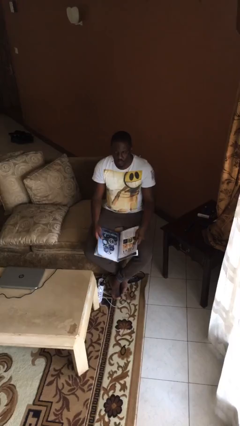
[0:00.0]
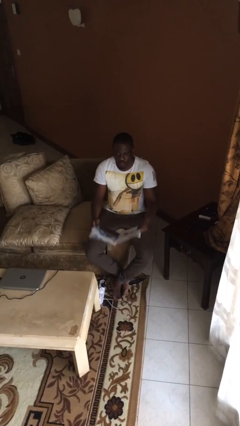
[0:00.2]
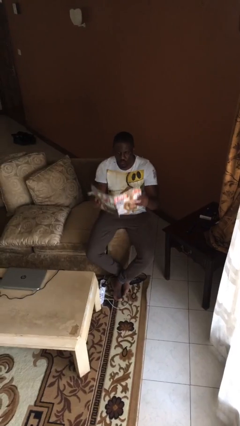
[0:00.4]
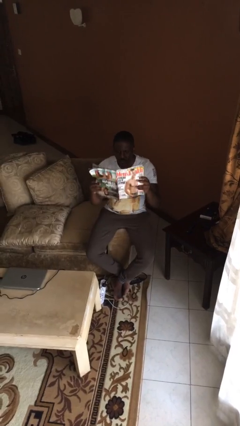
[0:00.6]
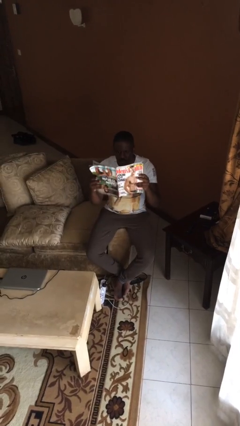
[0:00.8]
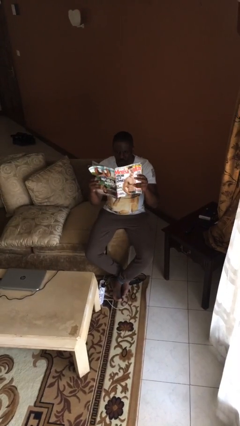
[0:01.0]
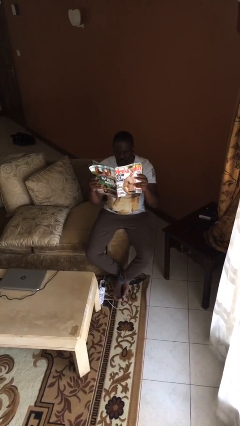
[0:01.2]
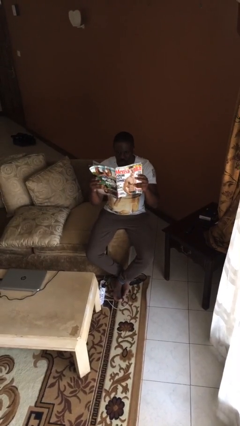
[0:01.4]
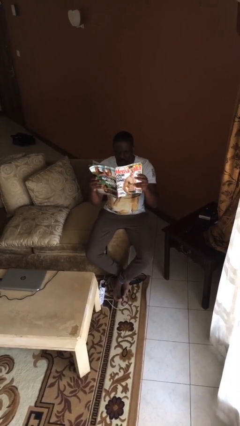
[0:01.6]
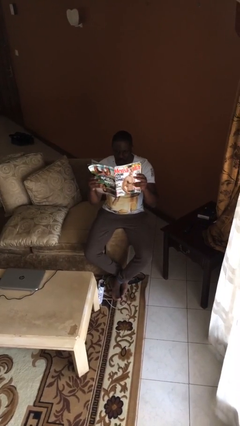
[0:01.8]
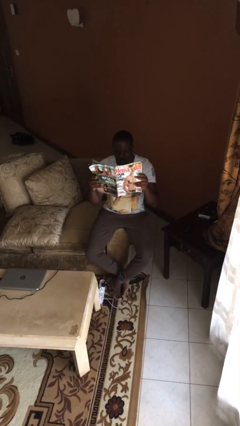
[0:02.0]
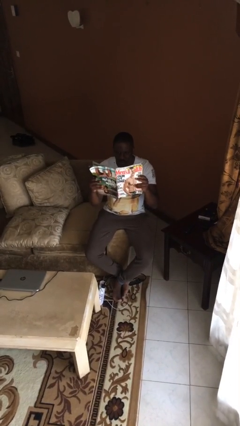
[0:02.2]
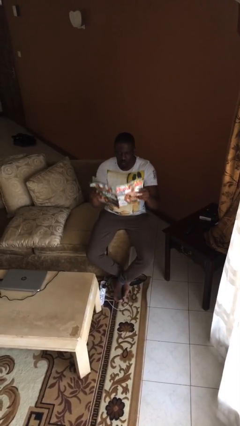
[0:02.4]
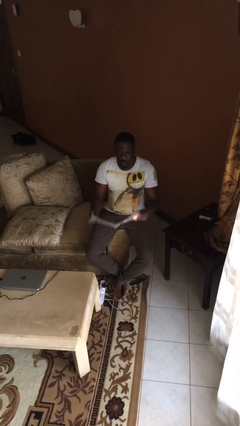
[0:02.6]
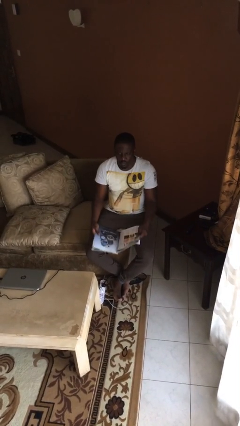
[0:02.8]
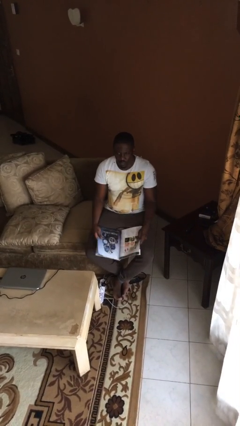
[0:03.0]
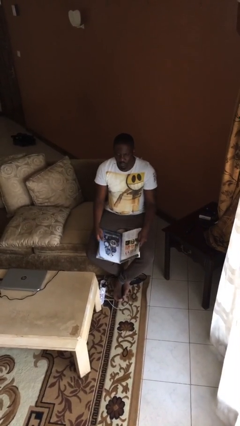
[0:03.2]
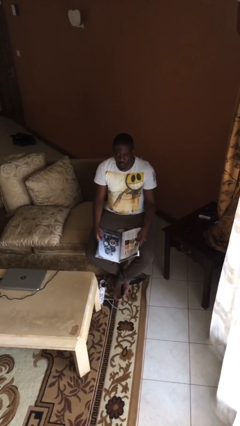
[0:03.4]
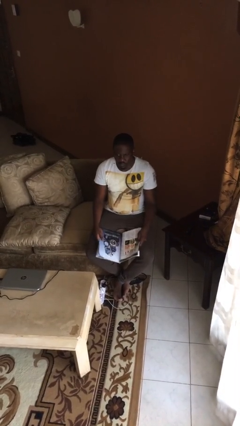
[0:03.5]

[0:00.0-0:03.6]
person reads document

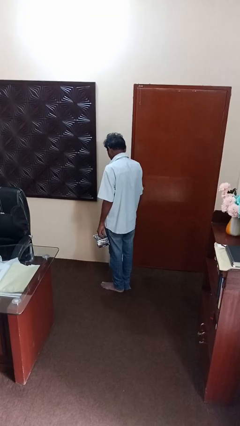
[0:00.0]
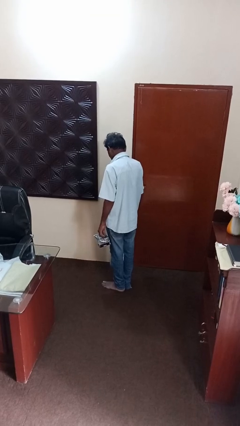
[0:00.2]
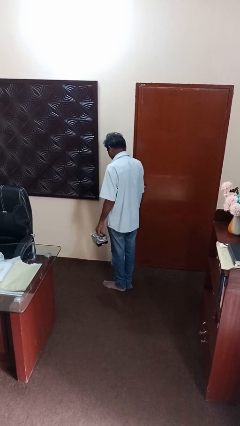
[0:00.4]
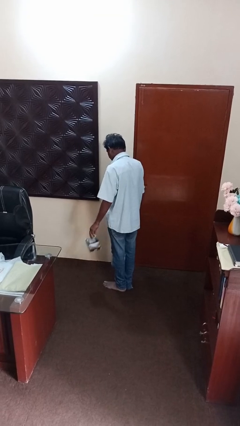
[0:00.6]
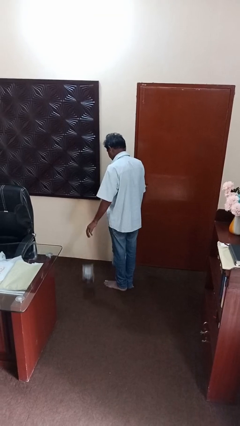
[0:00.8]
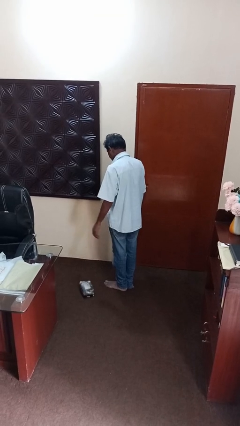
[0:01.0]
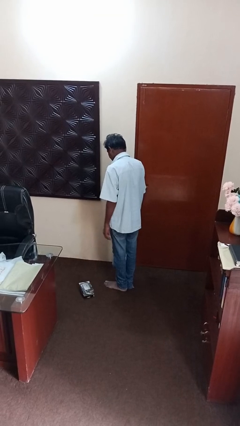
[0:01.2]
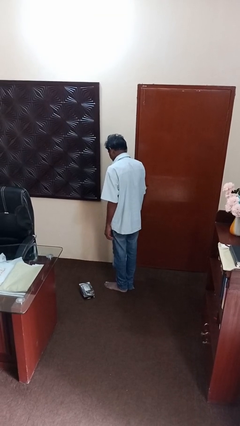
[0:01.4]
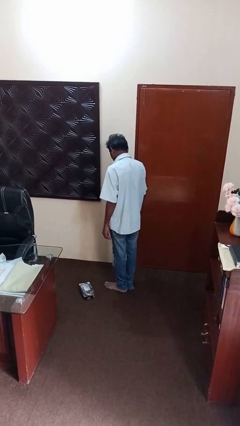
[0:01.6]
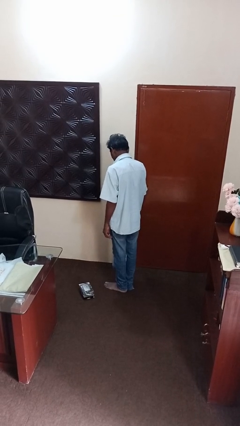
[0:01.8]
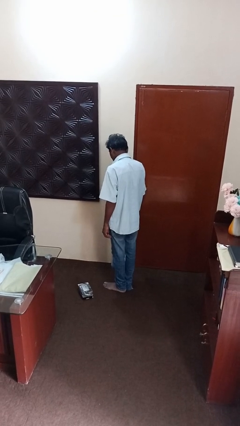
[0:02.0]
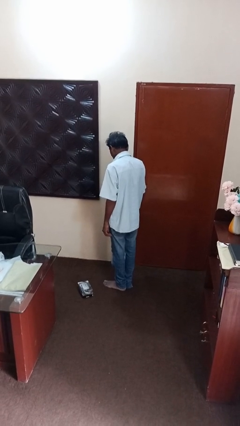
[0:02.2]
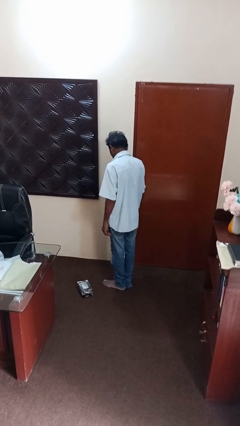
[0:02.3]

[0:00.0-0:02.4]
person throws object to ground

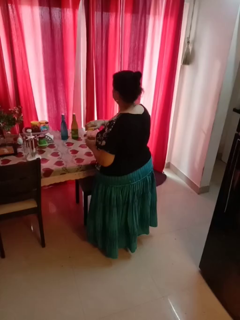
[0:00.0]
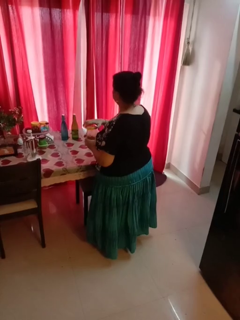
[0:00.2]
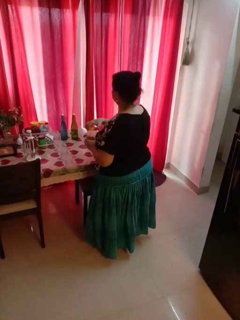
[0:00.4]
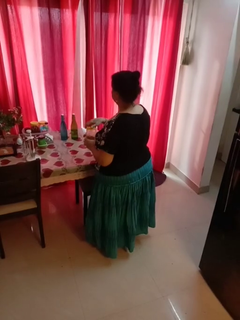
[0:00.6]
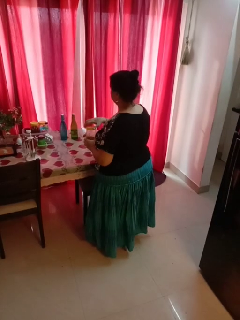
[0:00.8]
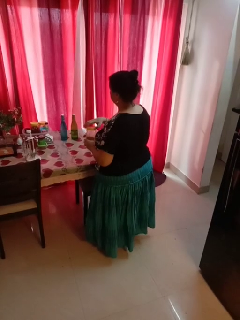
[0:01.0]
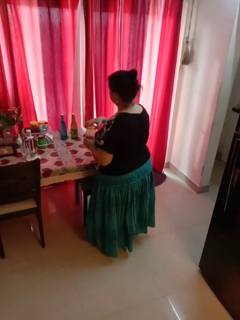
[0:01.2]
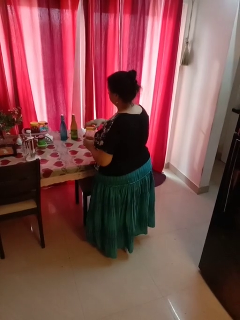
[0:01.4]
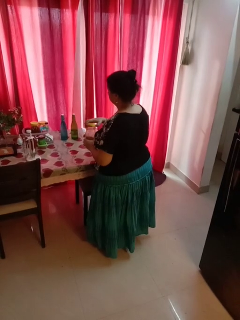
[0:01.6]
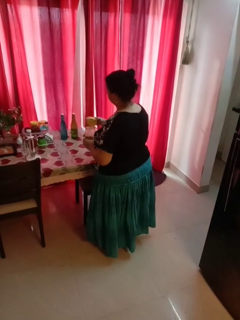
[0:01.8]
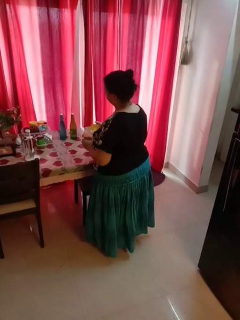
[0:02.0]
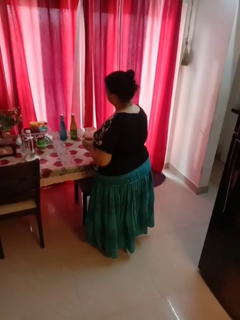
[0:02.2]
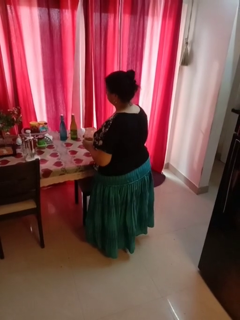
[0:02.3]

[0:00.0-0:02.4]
person opens jar

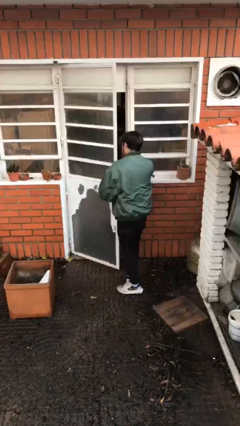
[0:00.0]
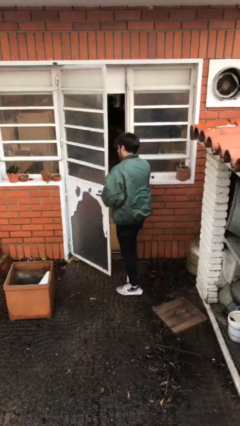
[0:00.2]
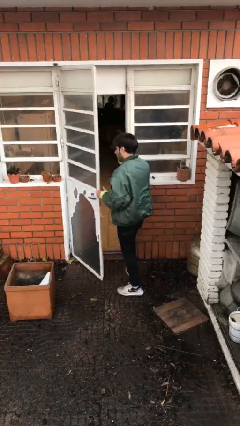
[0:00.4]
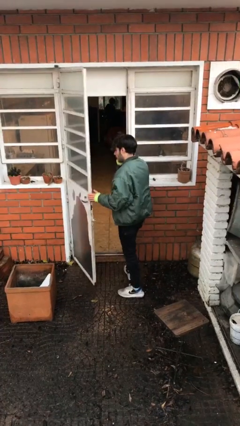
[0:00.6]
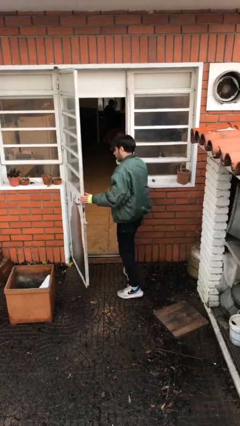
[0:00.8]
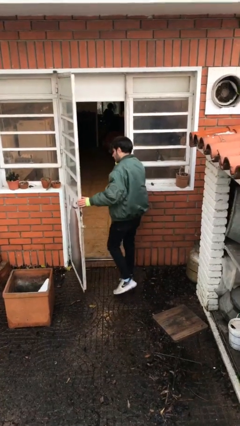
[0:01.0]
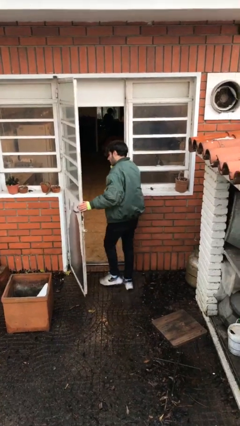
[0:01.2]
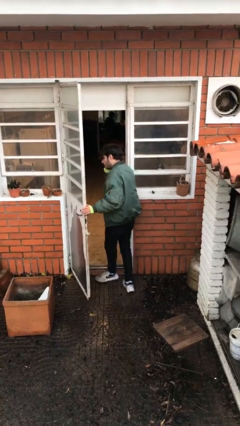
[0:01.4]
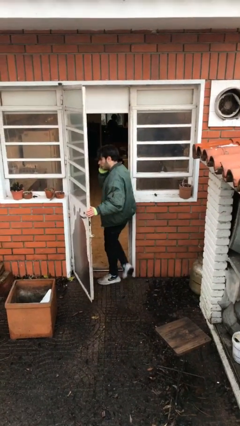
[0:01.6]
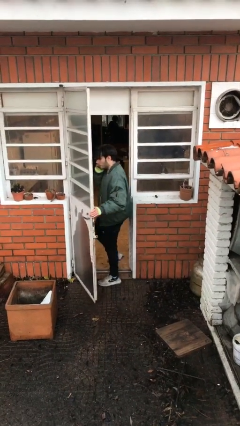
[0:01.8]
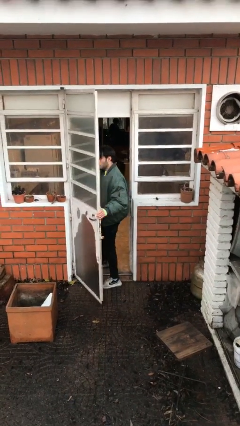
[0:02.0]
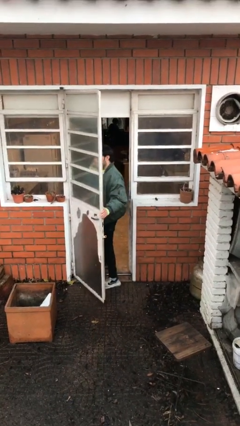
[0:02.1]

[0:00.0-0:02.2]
person exits scene through structure

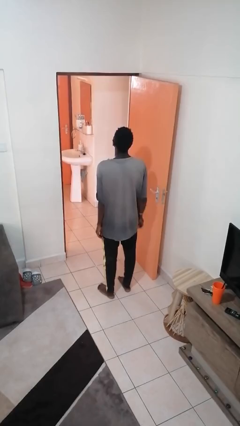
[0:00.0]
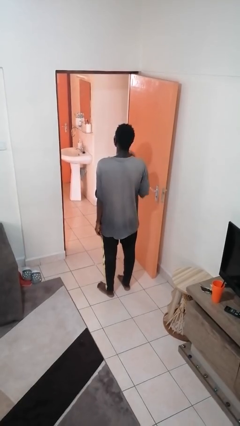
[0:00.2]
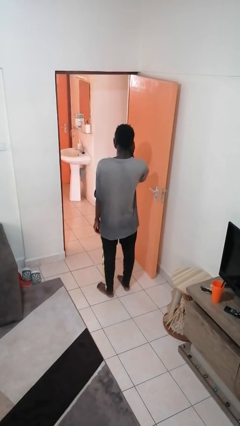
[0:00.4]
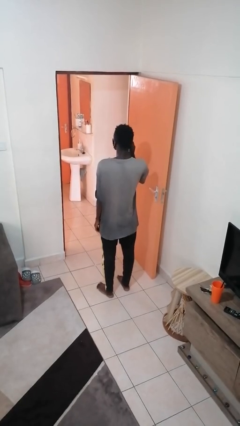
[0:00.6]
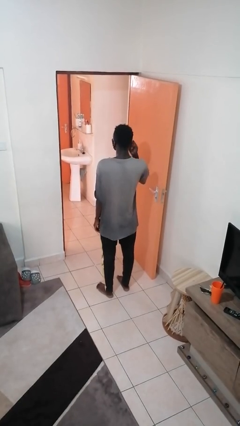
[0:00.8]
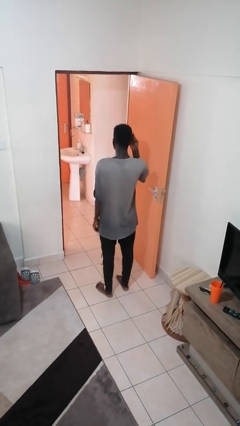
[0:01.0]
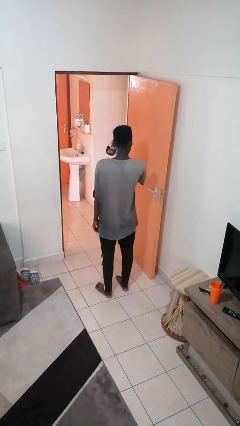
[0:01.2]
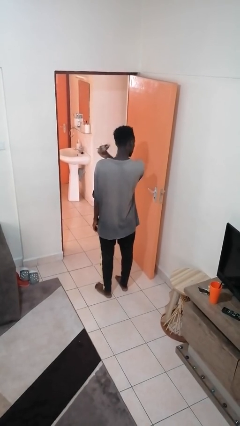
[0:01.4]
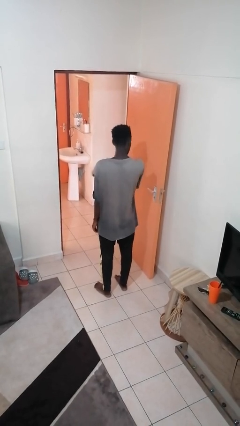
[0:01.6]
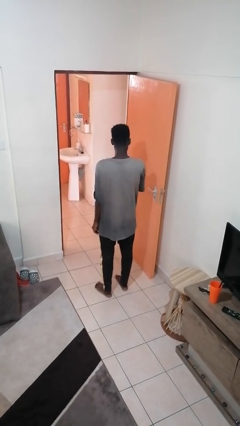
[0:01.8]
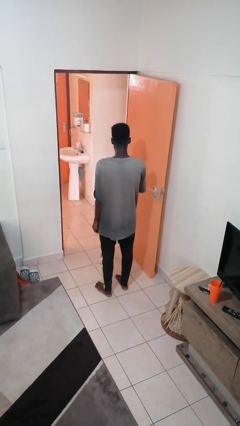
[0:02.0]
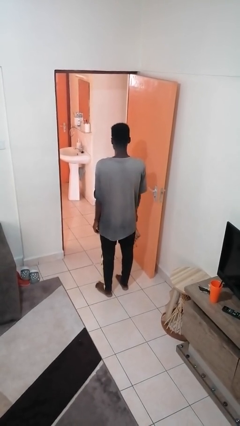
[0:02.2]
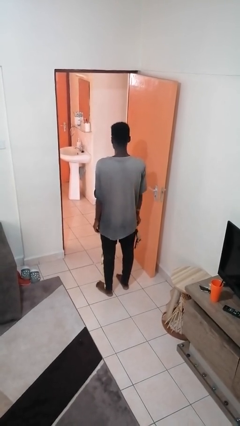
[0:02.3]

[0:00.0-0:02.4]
person takes off facemask

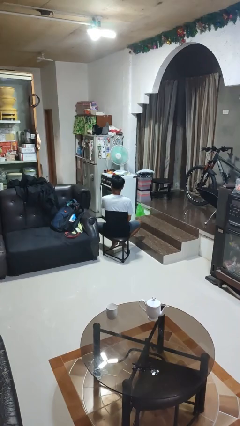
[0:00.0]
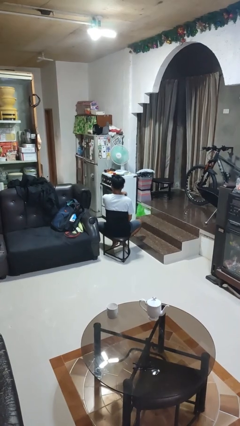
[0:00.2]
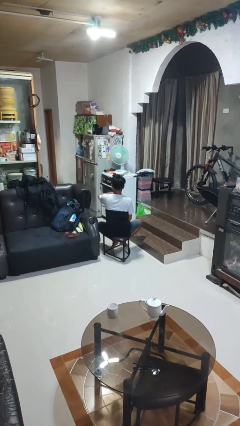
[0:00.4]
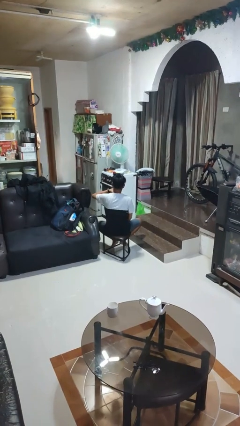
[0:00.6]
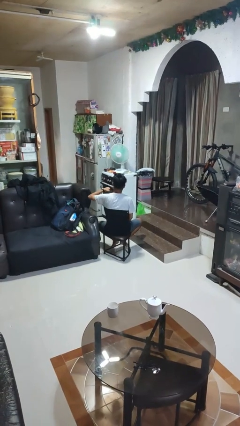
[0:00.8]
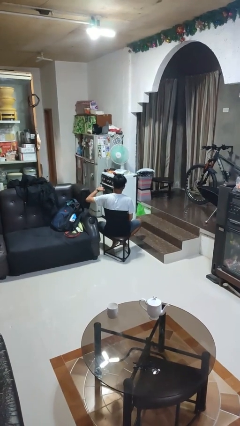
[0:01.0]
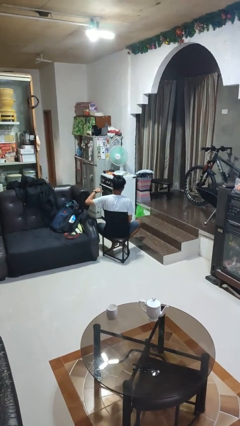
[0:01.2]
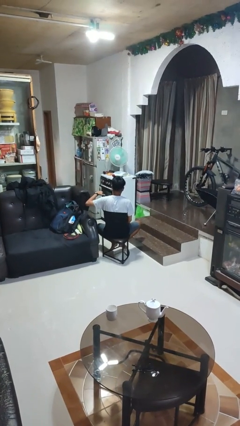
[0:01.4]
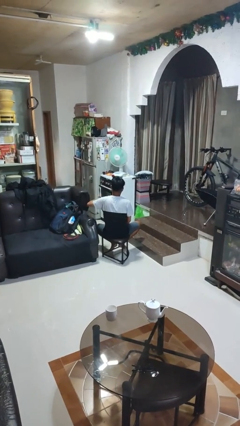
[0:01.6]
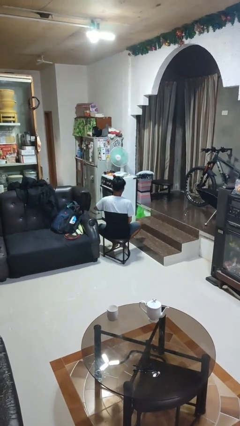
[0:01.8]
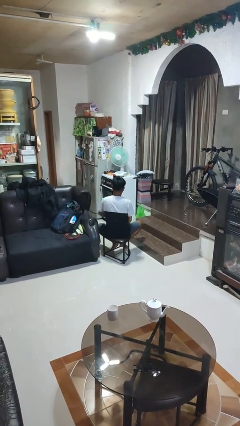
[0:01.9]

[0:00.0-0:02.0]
person gestures cut

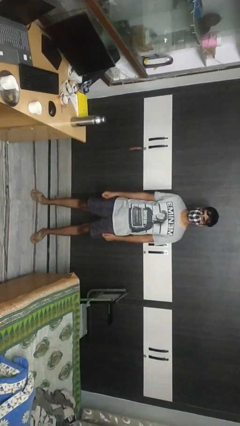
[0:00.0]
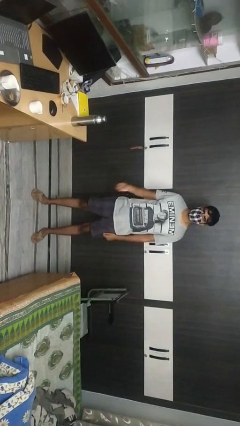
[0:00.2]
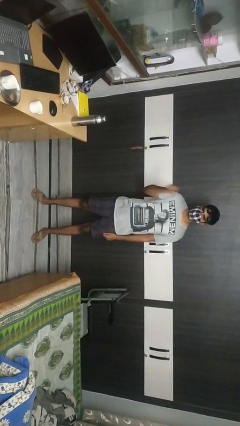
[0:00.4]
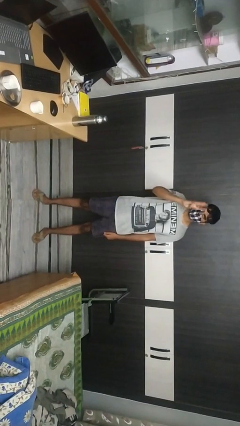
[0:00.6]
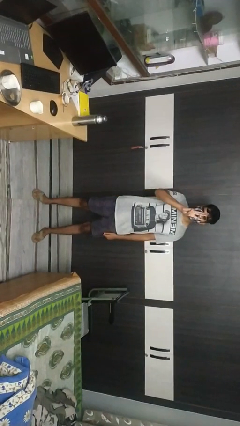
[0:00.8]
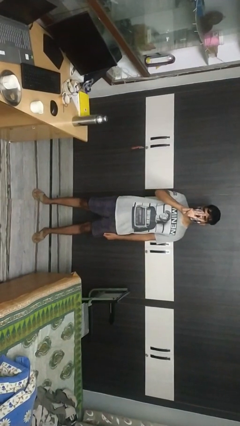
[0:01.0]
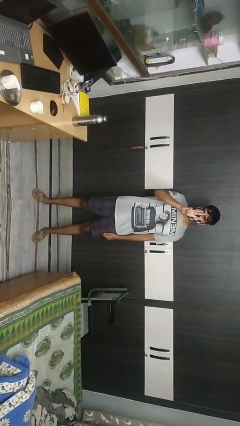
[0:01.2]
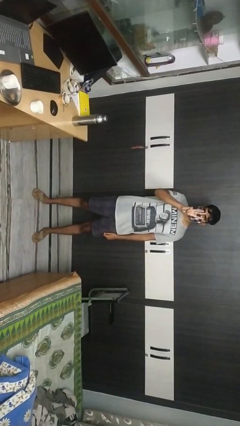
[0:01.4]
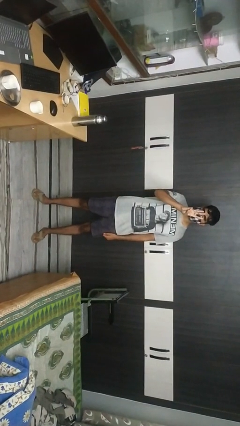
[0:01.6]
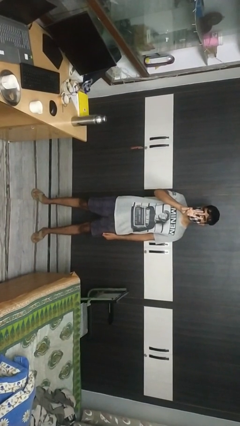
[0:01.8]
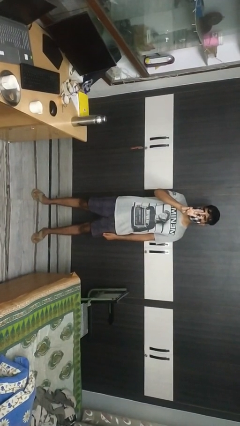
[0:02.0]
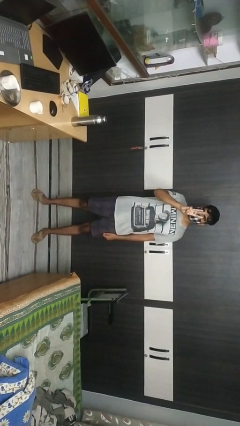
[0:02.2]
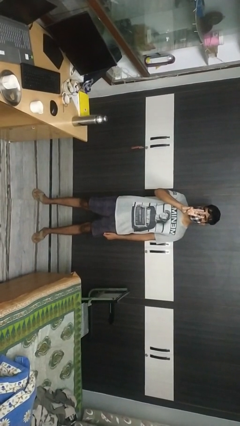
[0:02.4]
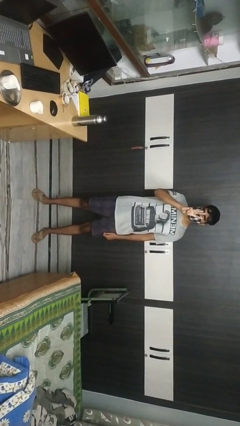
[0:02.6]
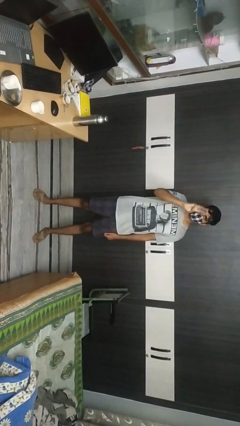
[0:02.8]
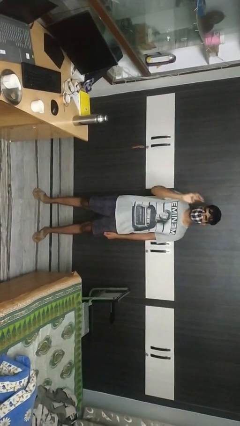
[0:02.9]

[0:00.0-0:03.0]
person gestures number three
